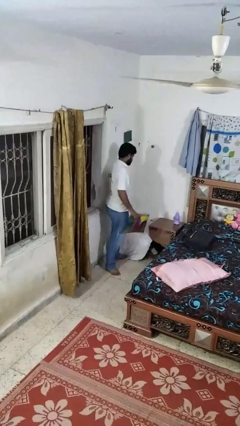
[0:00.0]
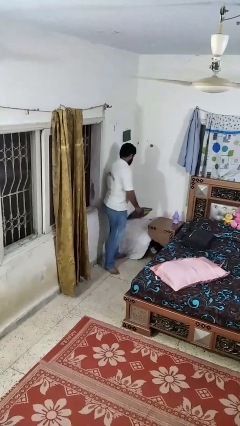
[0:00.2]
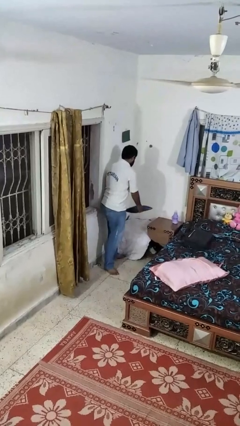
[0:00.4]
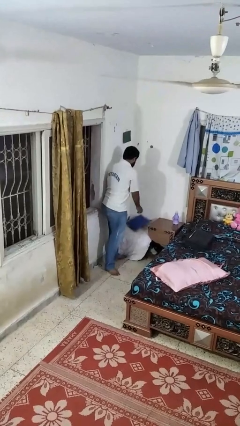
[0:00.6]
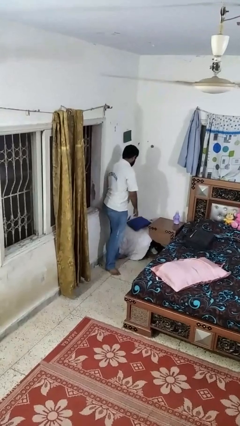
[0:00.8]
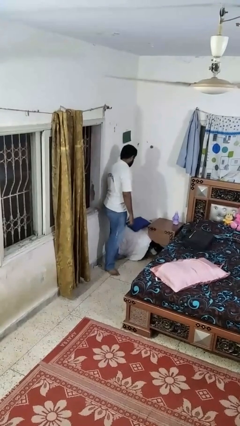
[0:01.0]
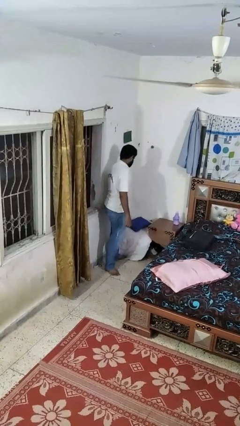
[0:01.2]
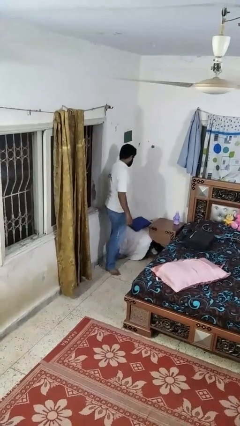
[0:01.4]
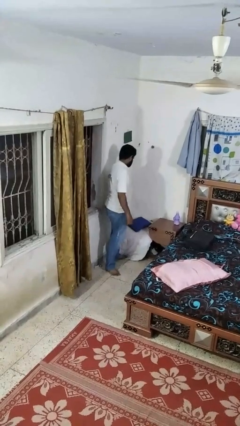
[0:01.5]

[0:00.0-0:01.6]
person puts down object on couch

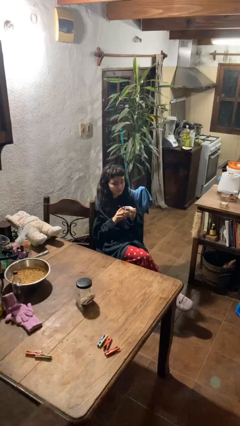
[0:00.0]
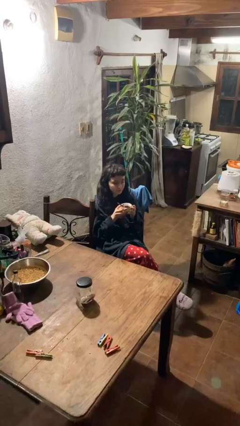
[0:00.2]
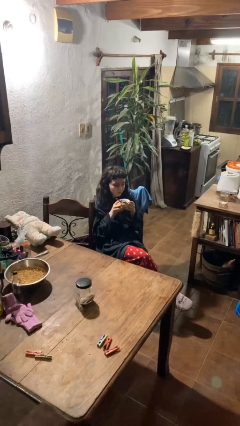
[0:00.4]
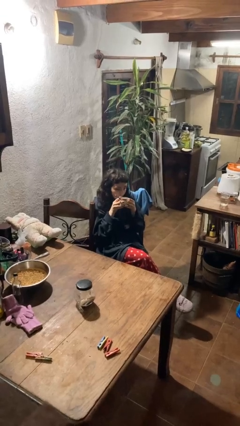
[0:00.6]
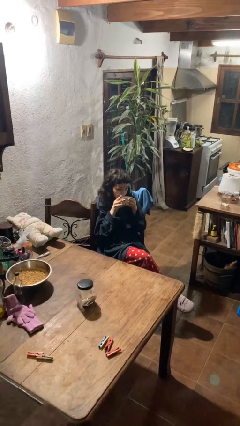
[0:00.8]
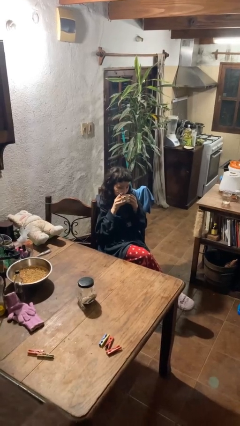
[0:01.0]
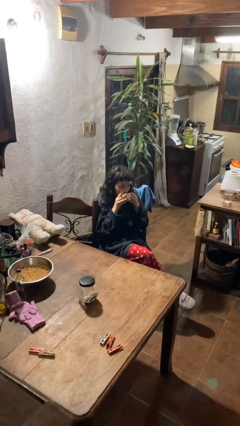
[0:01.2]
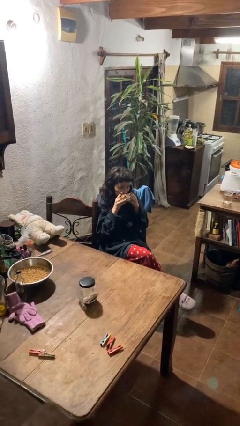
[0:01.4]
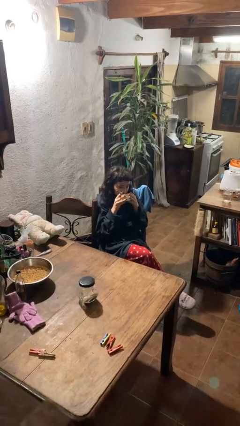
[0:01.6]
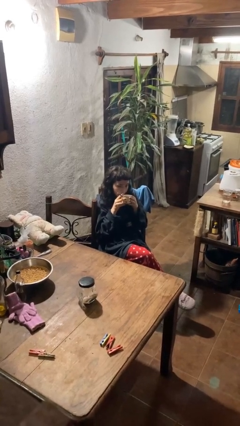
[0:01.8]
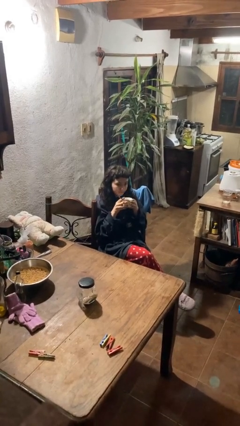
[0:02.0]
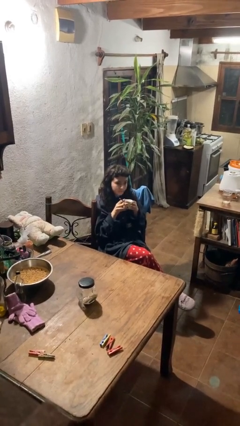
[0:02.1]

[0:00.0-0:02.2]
person drinks from mug

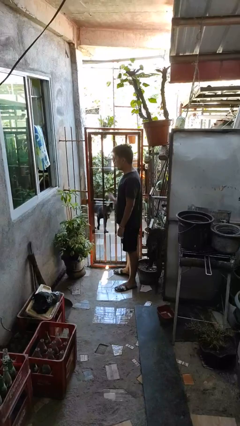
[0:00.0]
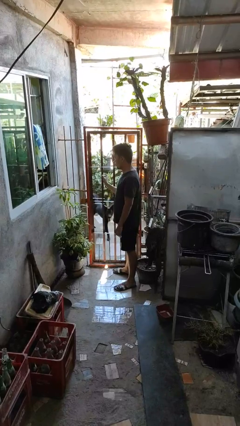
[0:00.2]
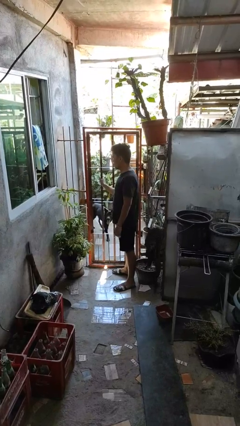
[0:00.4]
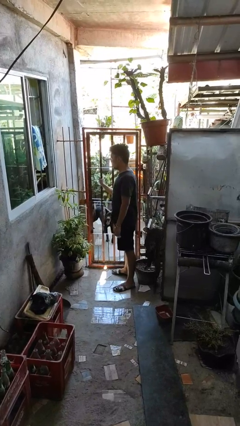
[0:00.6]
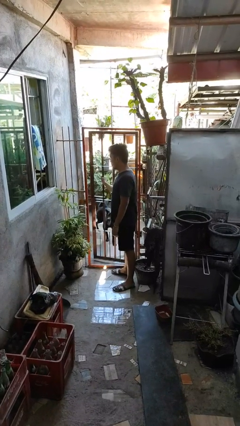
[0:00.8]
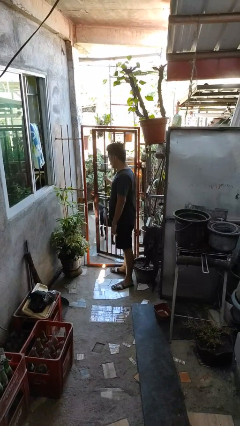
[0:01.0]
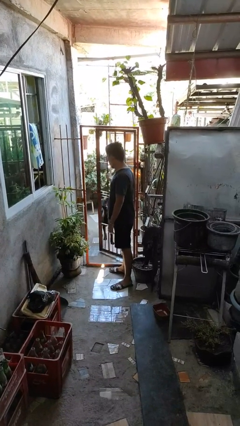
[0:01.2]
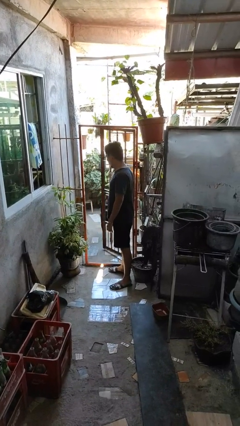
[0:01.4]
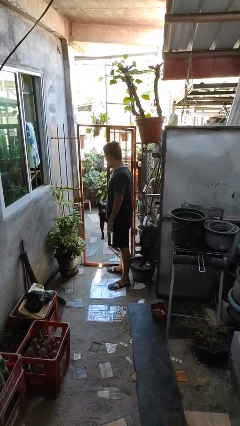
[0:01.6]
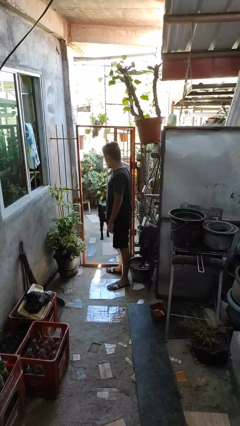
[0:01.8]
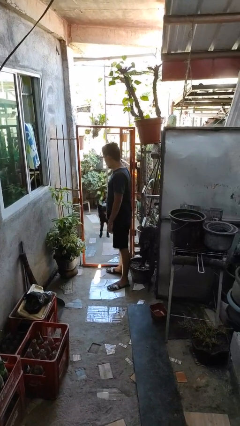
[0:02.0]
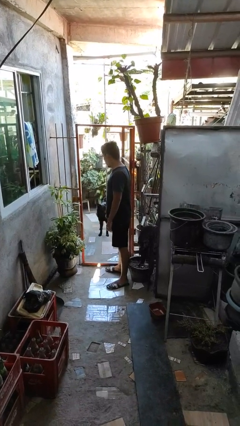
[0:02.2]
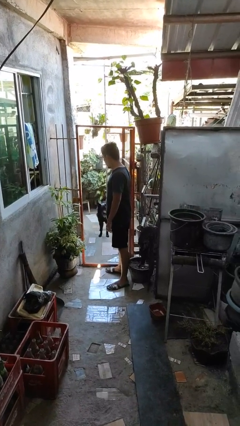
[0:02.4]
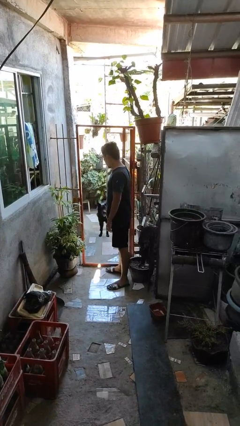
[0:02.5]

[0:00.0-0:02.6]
person opens gate

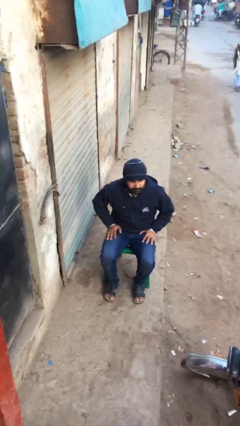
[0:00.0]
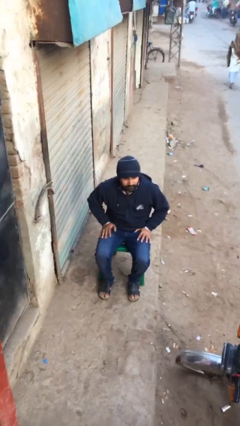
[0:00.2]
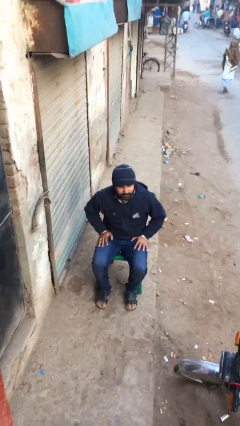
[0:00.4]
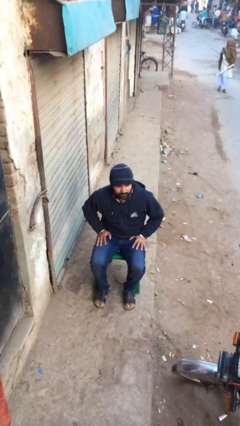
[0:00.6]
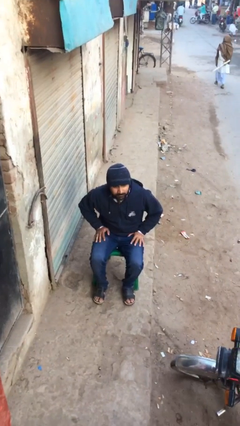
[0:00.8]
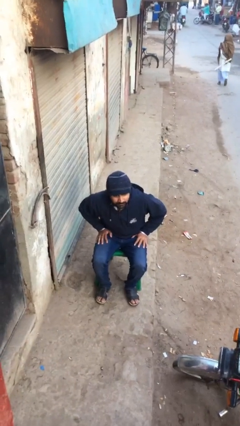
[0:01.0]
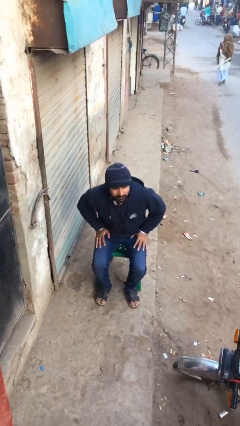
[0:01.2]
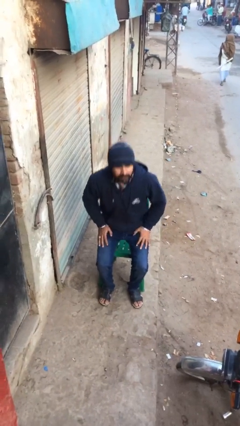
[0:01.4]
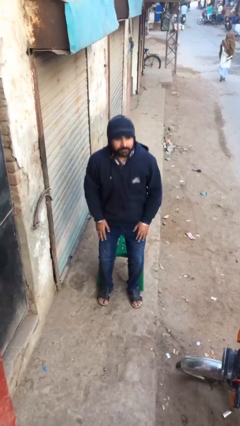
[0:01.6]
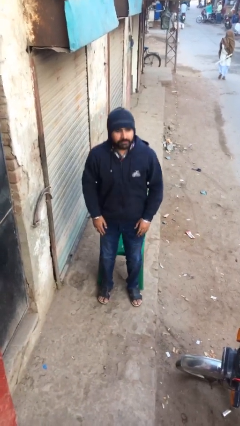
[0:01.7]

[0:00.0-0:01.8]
person stands up

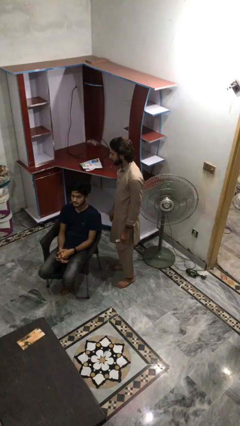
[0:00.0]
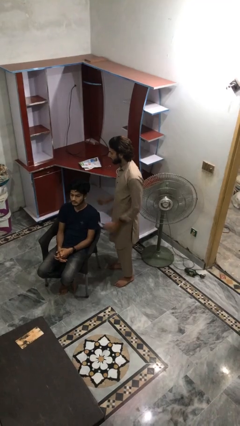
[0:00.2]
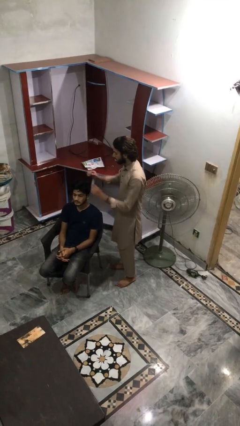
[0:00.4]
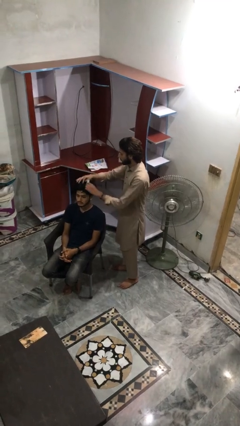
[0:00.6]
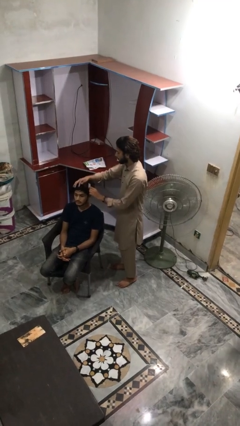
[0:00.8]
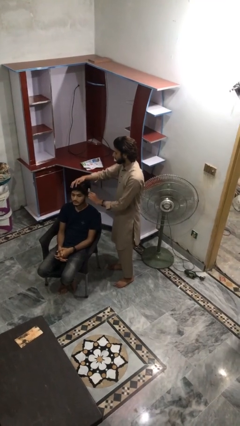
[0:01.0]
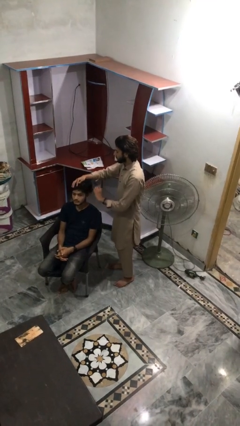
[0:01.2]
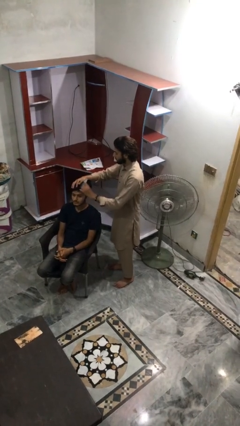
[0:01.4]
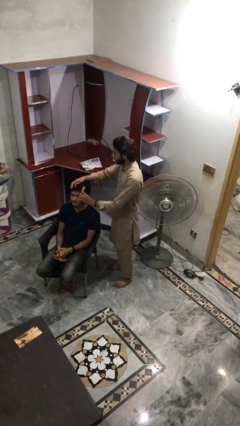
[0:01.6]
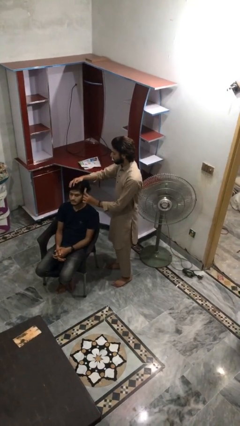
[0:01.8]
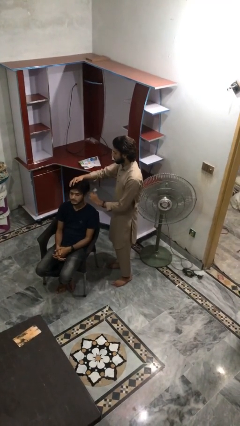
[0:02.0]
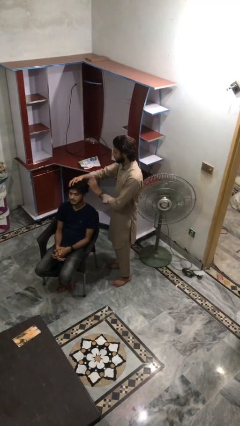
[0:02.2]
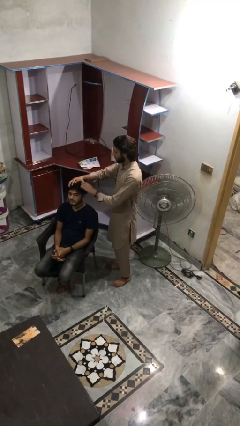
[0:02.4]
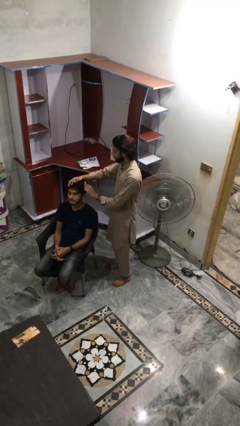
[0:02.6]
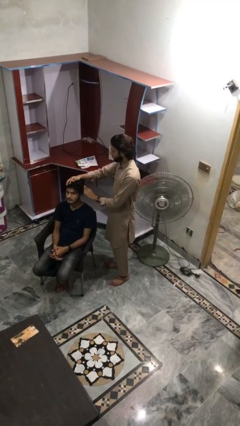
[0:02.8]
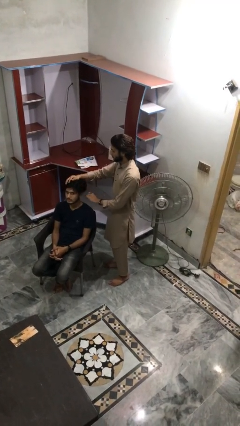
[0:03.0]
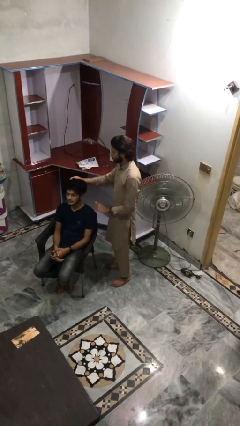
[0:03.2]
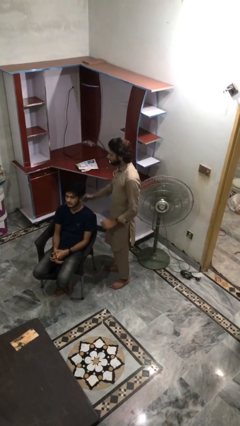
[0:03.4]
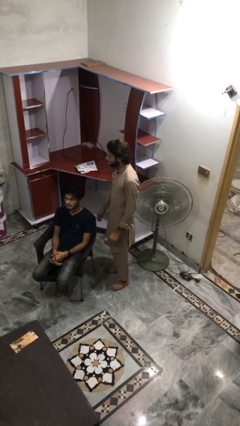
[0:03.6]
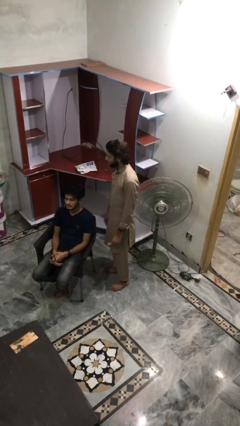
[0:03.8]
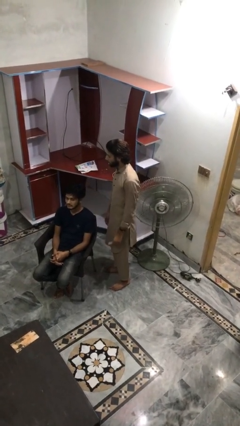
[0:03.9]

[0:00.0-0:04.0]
person brushes hair of person

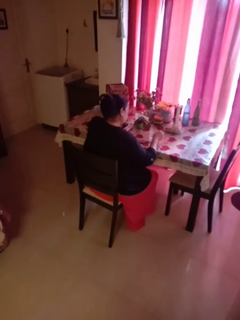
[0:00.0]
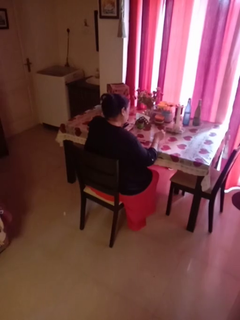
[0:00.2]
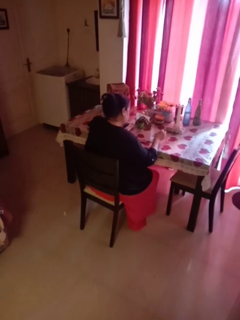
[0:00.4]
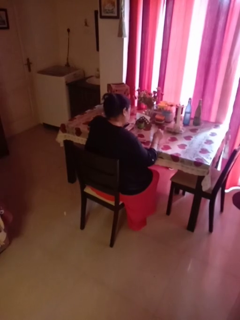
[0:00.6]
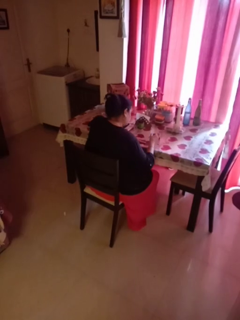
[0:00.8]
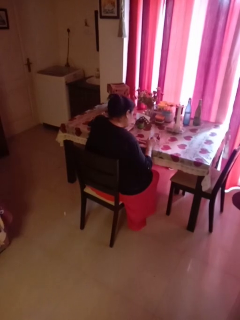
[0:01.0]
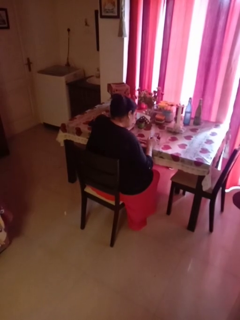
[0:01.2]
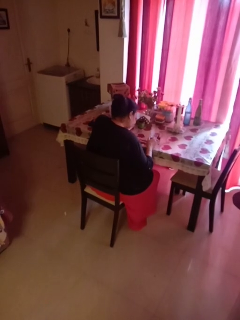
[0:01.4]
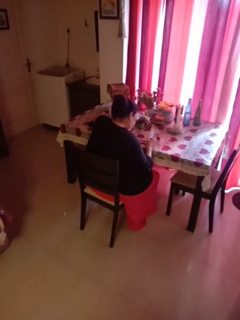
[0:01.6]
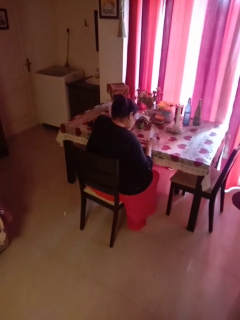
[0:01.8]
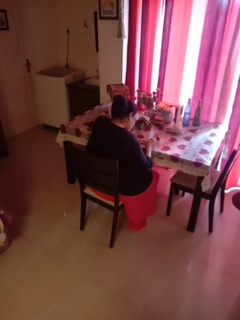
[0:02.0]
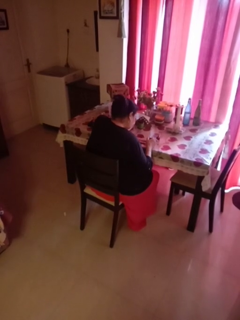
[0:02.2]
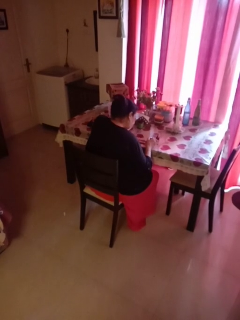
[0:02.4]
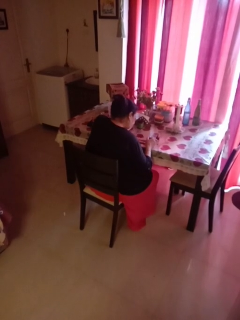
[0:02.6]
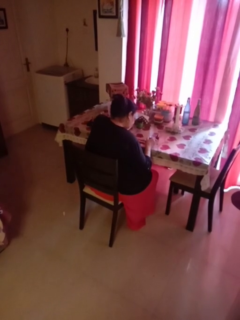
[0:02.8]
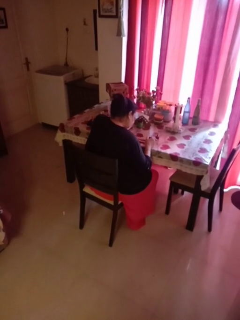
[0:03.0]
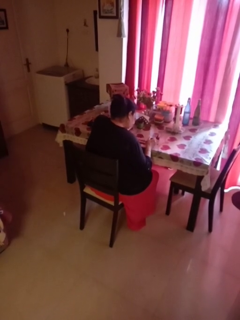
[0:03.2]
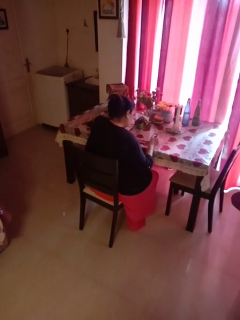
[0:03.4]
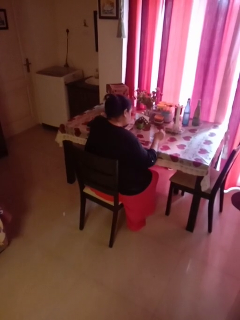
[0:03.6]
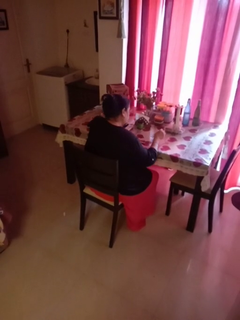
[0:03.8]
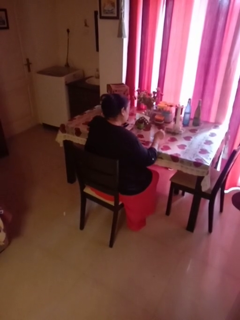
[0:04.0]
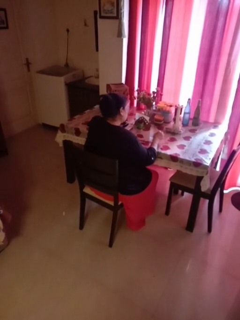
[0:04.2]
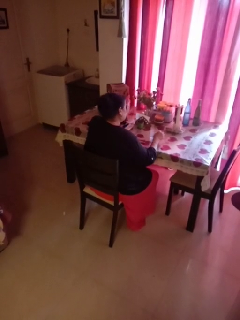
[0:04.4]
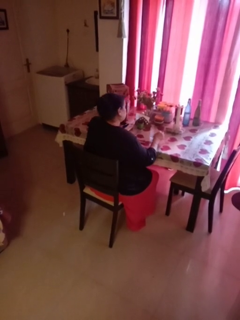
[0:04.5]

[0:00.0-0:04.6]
person paints fingernails

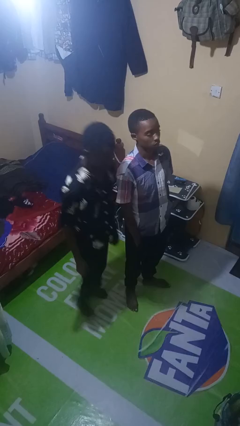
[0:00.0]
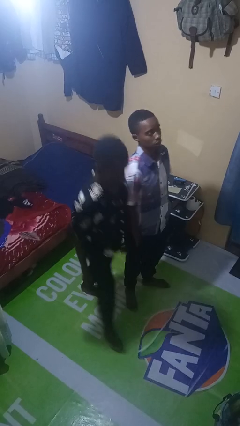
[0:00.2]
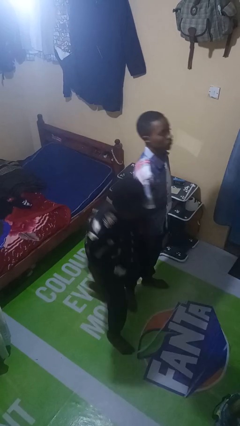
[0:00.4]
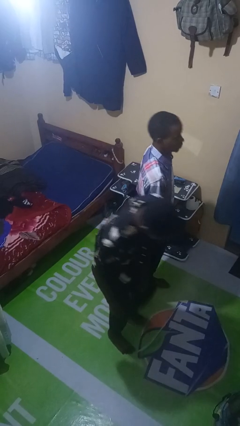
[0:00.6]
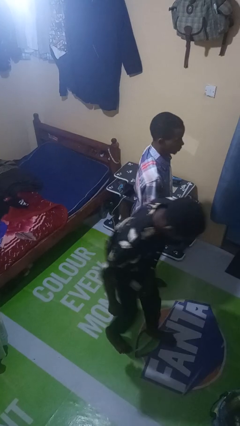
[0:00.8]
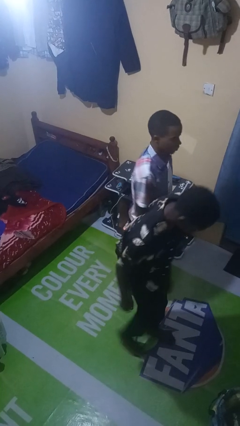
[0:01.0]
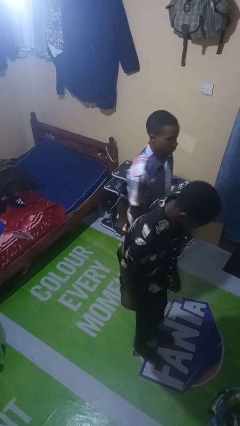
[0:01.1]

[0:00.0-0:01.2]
person bumps into person

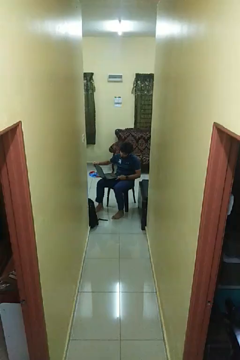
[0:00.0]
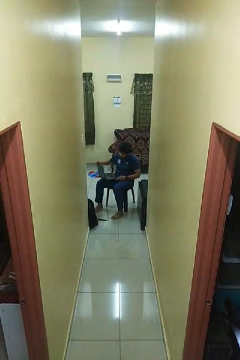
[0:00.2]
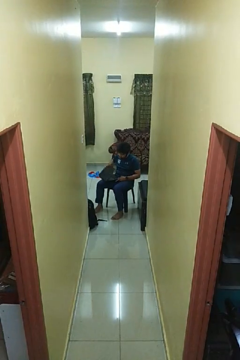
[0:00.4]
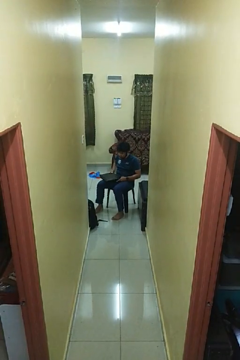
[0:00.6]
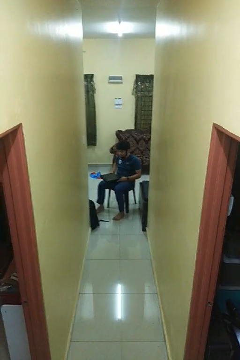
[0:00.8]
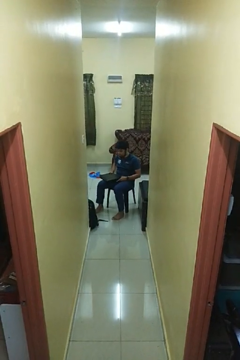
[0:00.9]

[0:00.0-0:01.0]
person closes laptop
